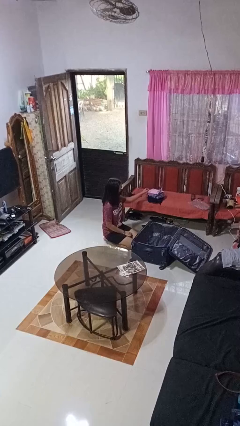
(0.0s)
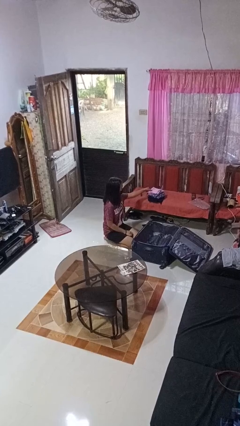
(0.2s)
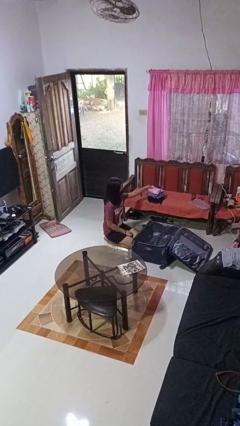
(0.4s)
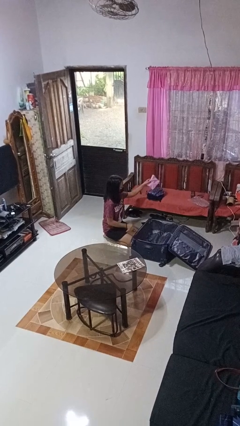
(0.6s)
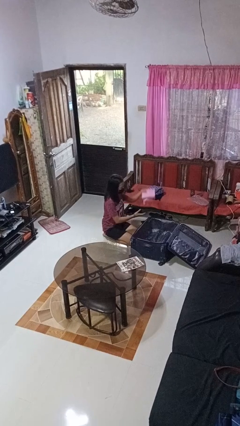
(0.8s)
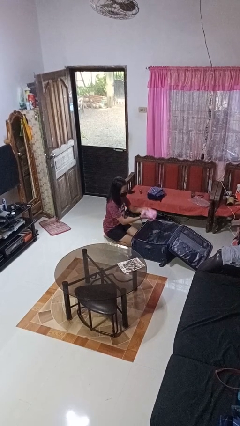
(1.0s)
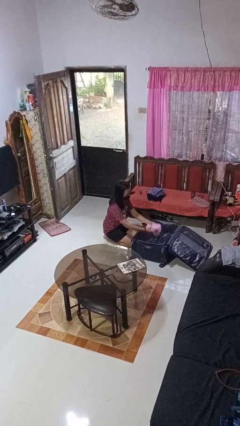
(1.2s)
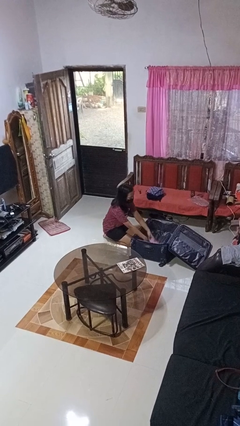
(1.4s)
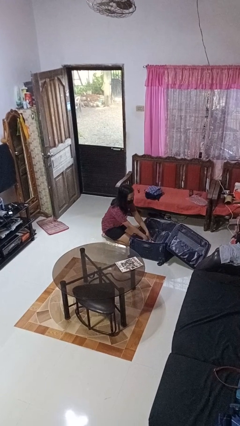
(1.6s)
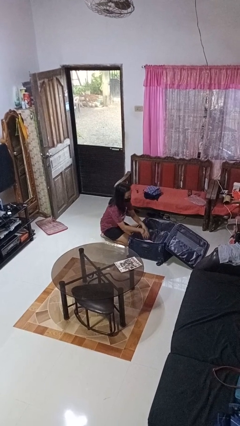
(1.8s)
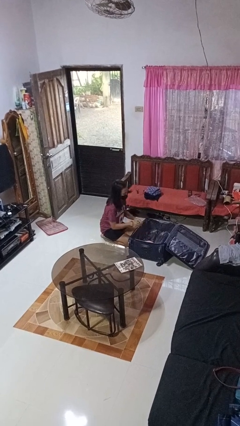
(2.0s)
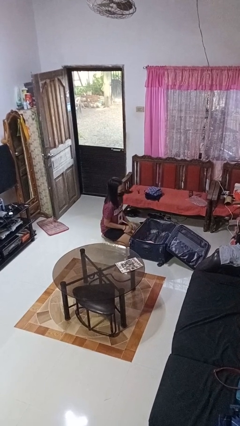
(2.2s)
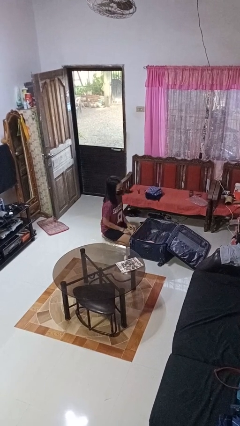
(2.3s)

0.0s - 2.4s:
person loads clothes into suitcase

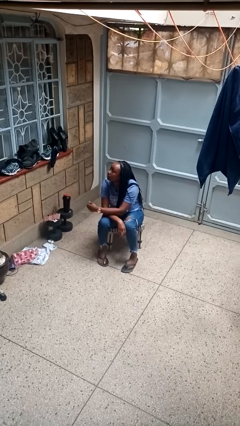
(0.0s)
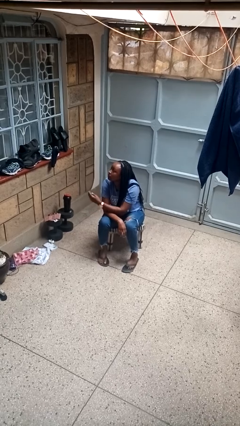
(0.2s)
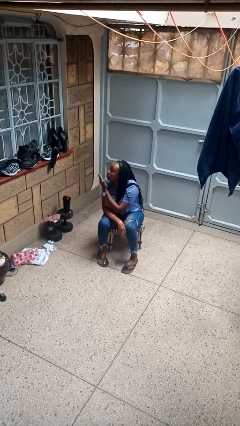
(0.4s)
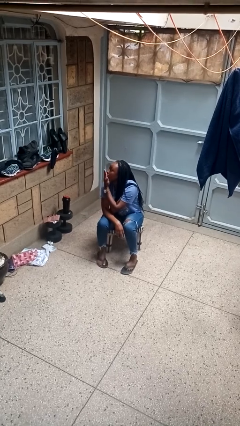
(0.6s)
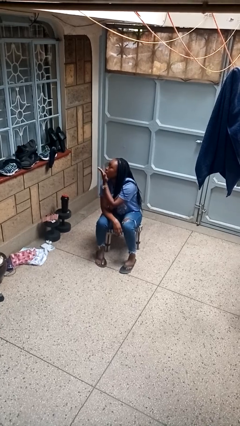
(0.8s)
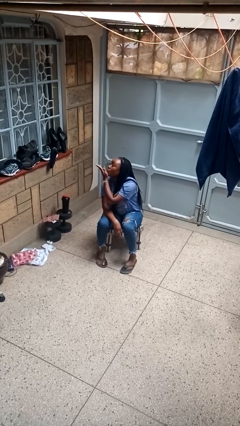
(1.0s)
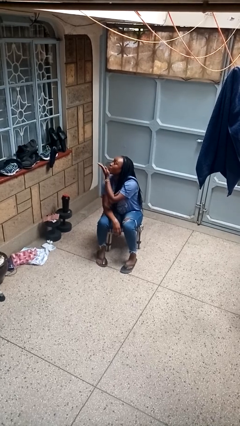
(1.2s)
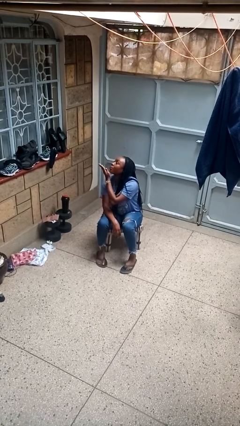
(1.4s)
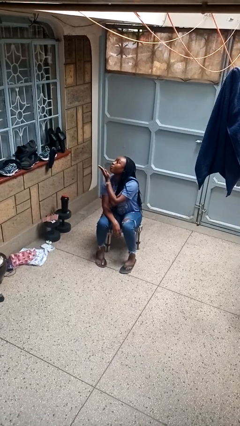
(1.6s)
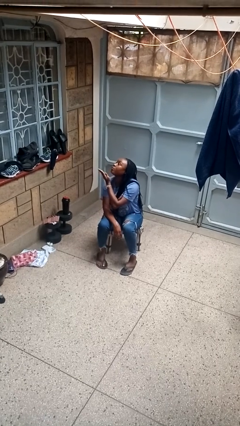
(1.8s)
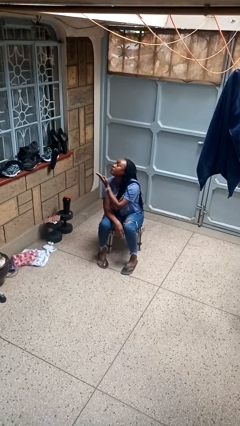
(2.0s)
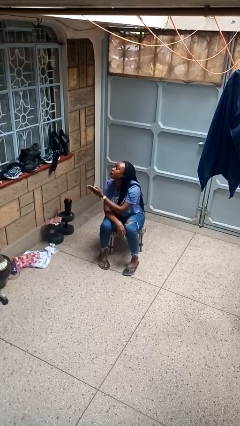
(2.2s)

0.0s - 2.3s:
person gestures blow kiss

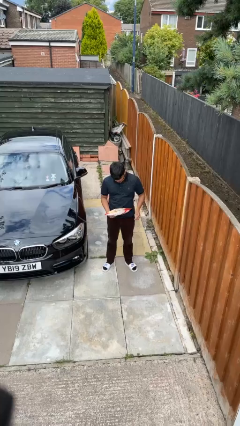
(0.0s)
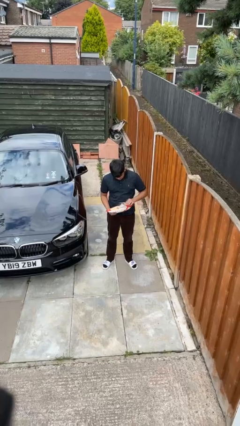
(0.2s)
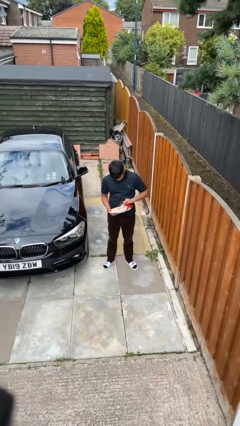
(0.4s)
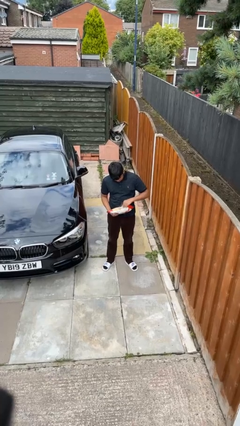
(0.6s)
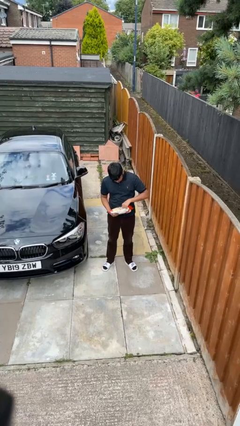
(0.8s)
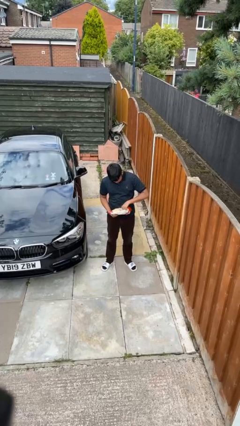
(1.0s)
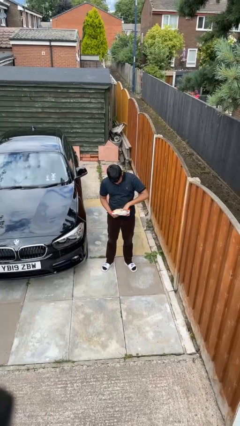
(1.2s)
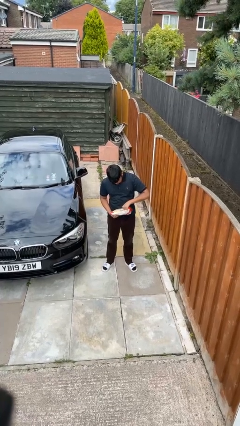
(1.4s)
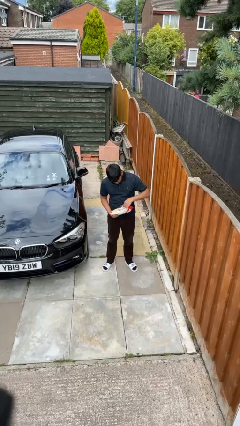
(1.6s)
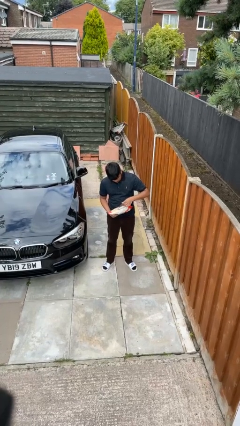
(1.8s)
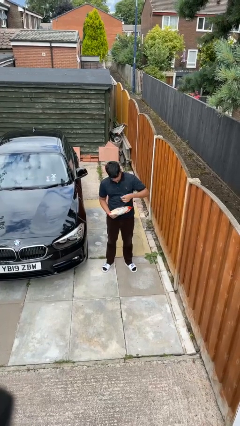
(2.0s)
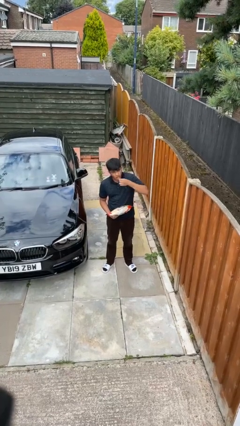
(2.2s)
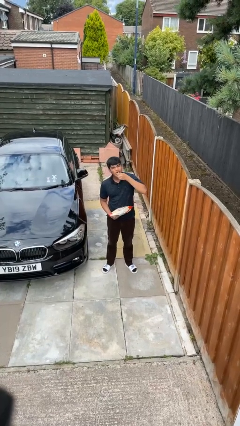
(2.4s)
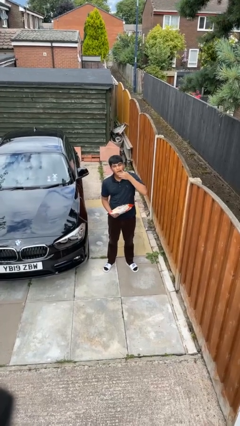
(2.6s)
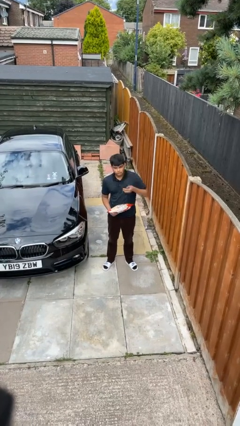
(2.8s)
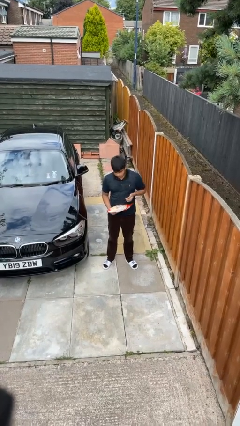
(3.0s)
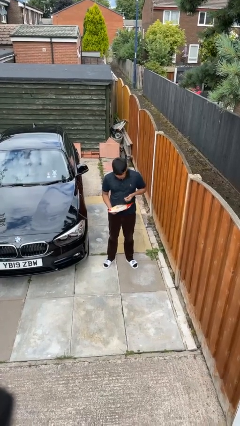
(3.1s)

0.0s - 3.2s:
person eats snack from bag

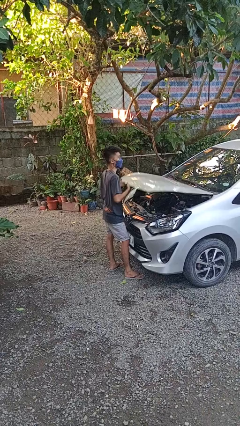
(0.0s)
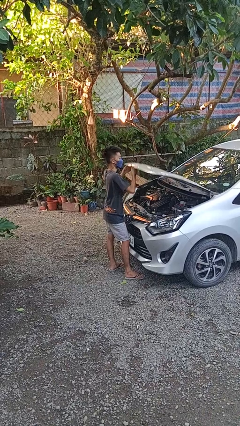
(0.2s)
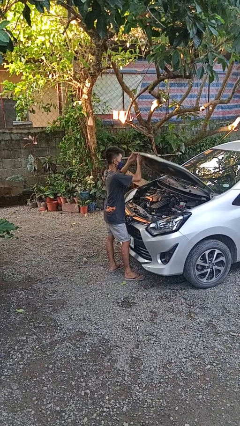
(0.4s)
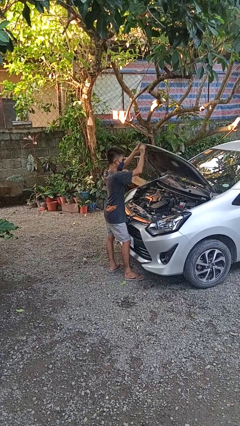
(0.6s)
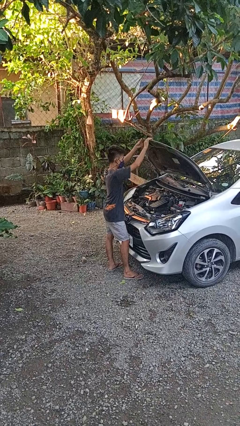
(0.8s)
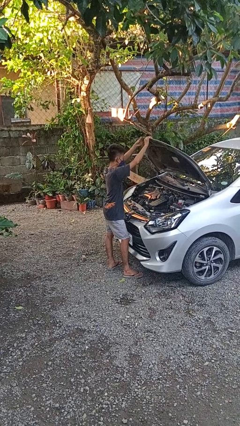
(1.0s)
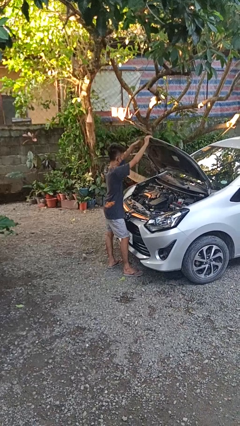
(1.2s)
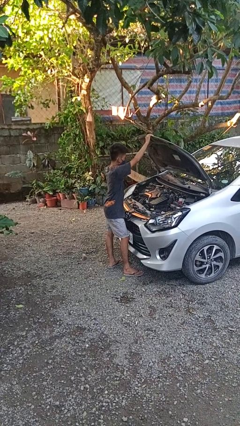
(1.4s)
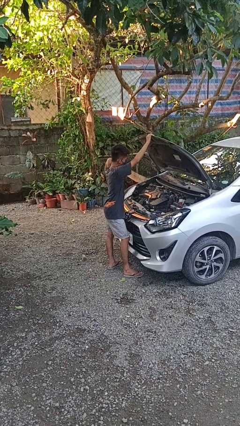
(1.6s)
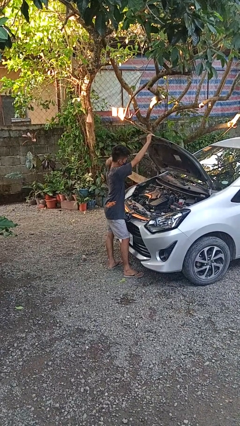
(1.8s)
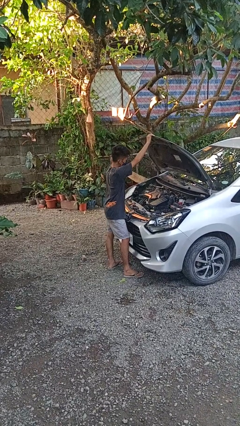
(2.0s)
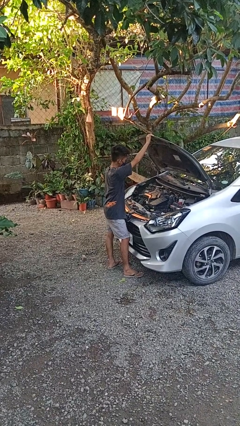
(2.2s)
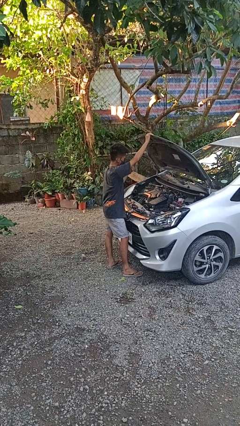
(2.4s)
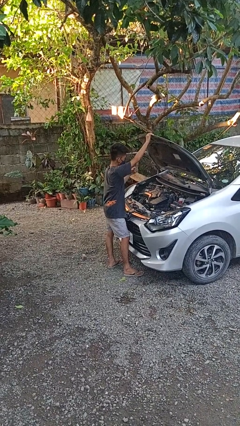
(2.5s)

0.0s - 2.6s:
person opens car hood

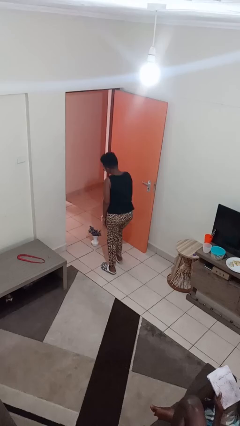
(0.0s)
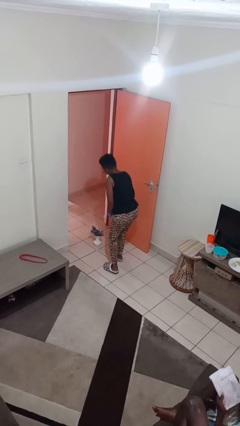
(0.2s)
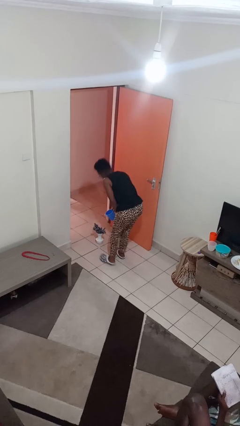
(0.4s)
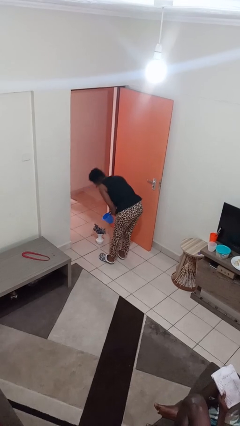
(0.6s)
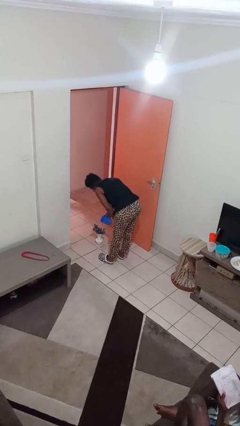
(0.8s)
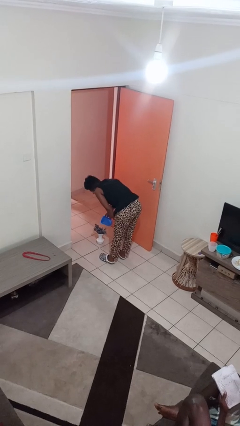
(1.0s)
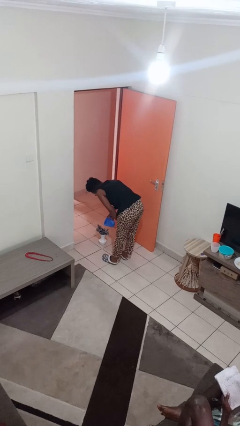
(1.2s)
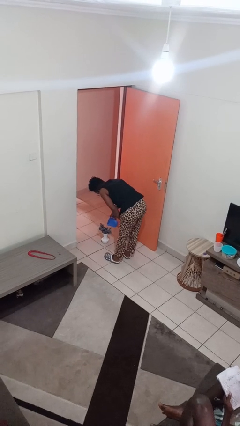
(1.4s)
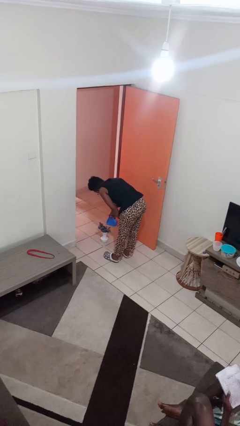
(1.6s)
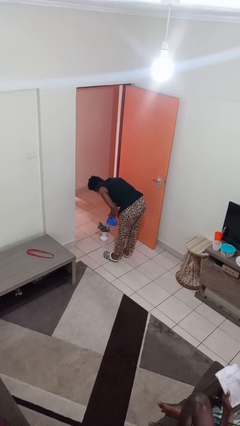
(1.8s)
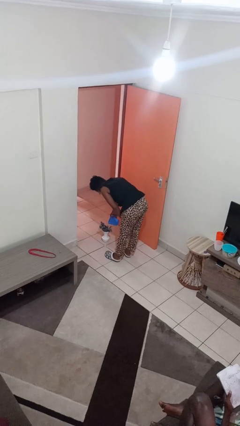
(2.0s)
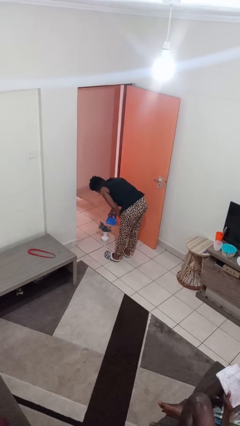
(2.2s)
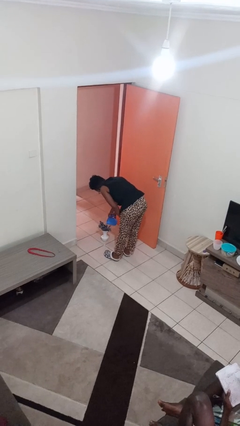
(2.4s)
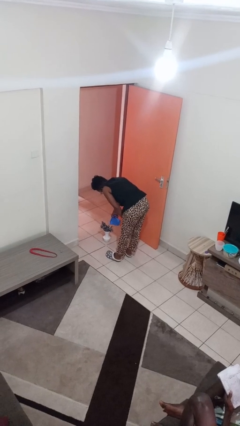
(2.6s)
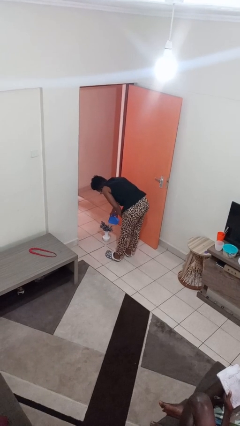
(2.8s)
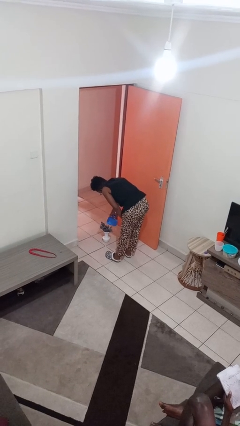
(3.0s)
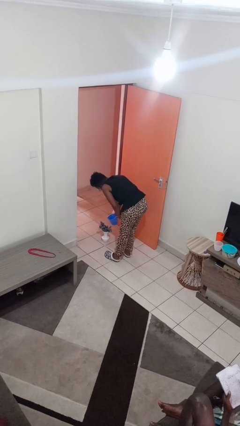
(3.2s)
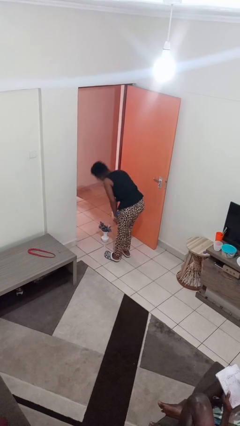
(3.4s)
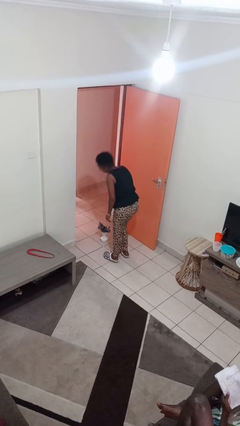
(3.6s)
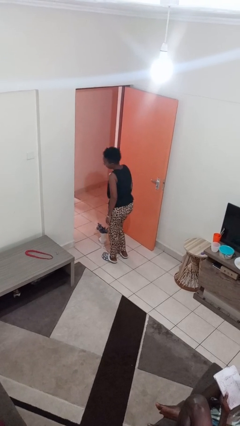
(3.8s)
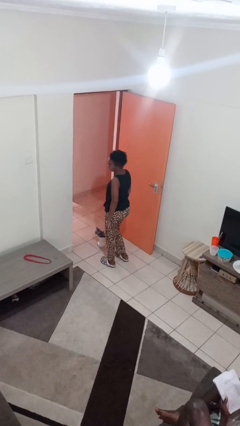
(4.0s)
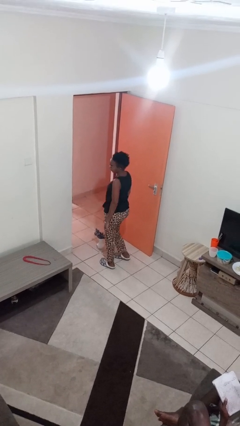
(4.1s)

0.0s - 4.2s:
person waters houseplant

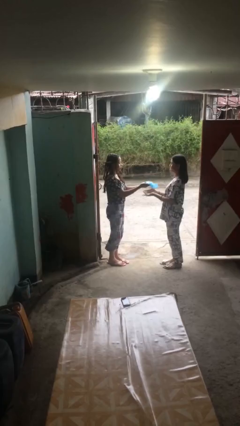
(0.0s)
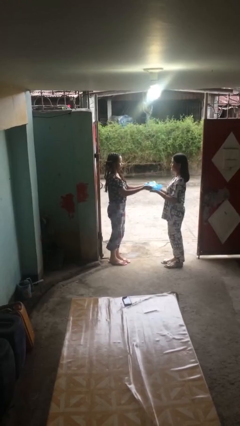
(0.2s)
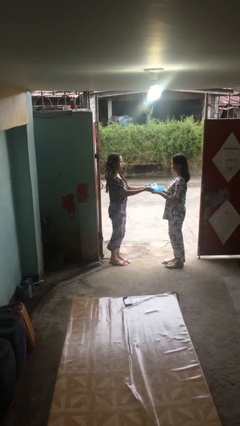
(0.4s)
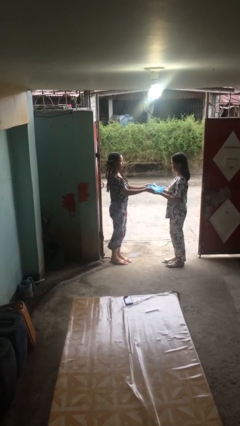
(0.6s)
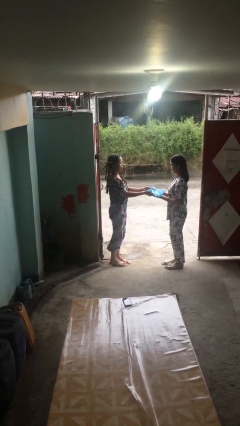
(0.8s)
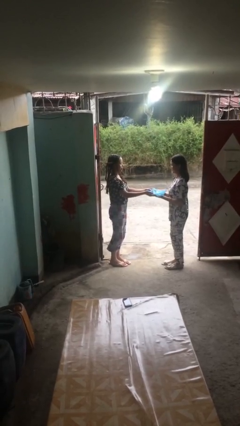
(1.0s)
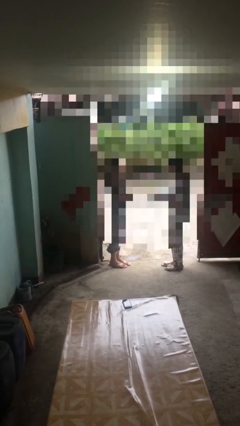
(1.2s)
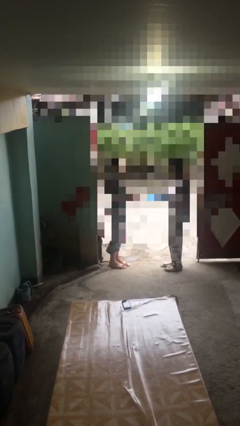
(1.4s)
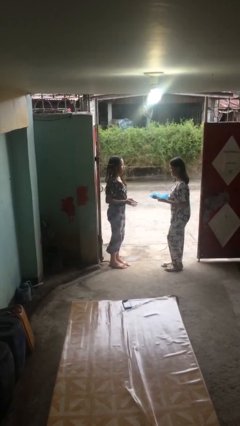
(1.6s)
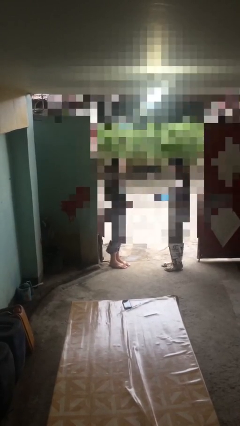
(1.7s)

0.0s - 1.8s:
person transfers object to person

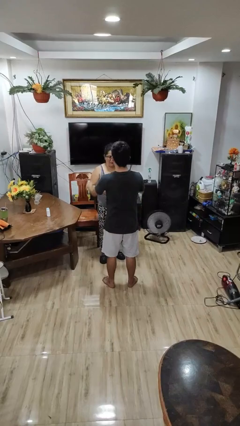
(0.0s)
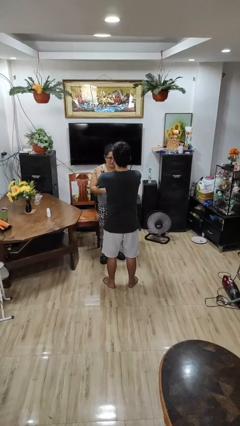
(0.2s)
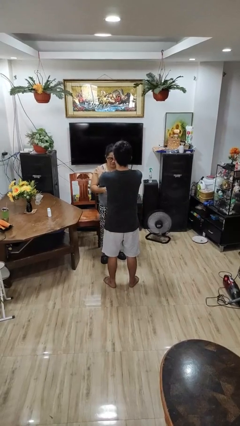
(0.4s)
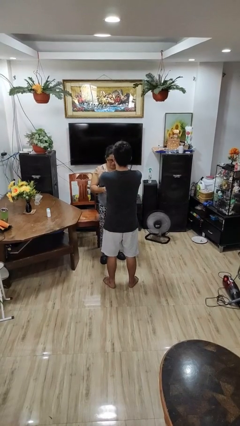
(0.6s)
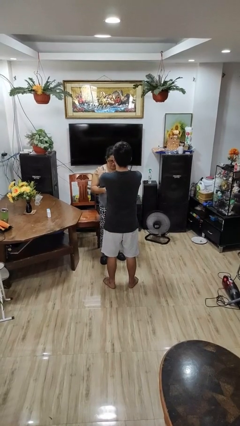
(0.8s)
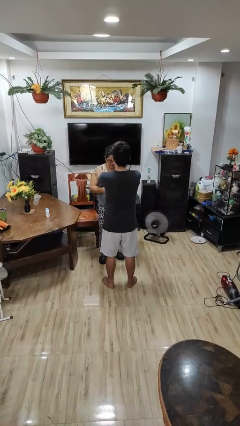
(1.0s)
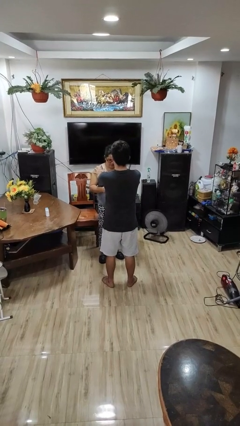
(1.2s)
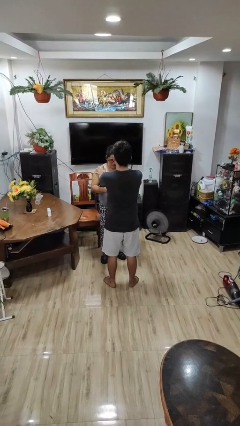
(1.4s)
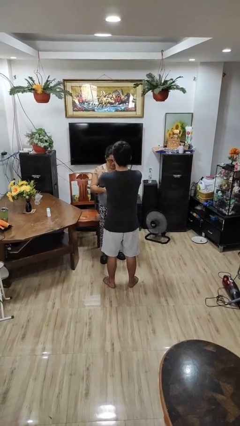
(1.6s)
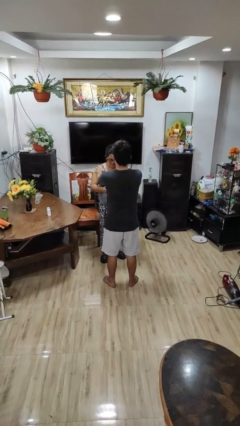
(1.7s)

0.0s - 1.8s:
person grabs person by shoulder
